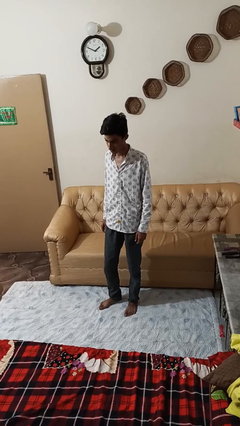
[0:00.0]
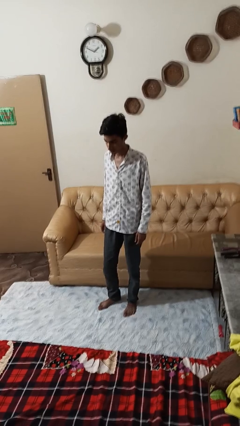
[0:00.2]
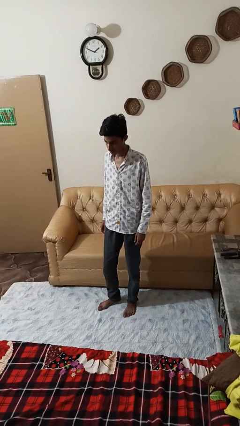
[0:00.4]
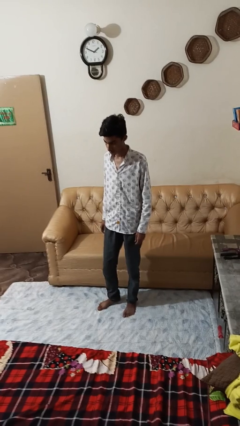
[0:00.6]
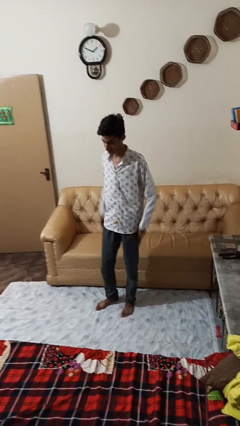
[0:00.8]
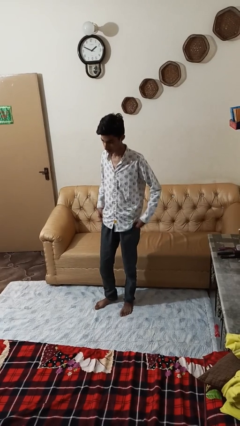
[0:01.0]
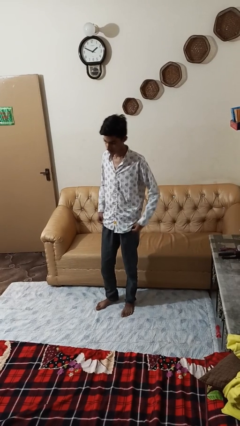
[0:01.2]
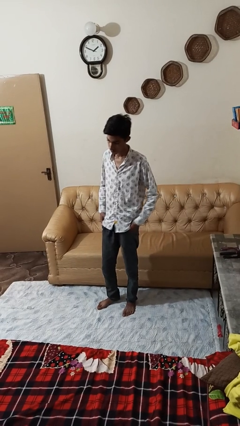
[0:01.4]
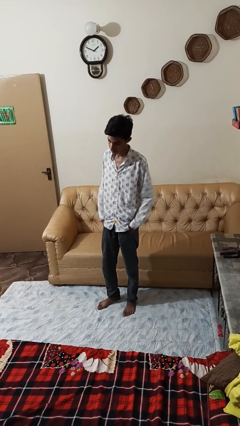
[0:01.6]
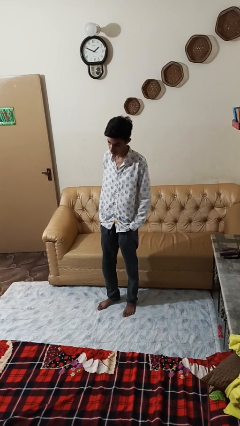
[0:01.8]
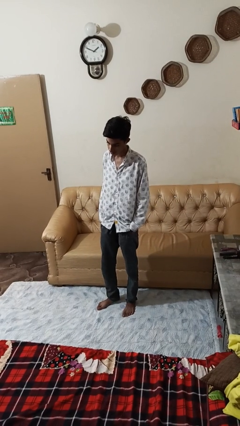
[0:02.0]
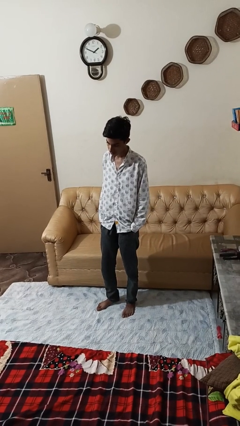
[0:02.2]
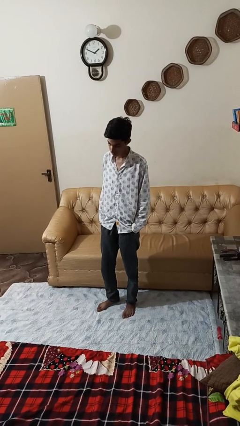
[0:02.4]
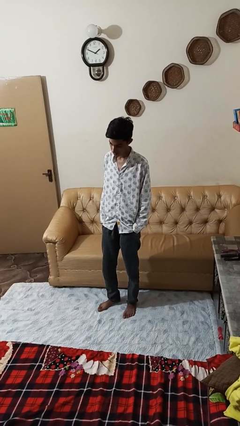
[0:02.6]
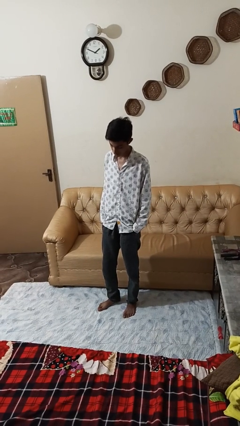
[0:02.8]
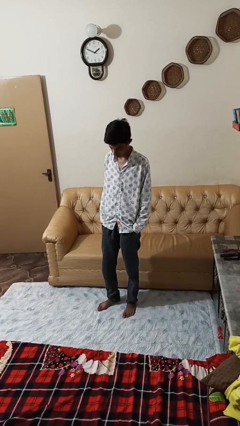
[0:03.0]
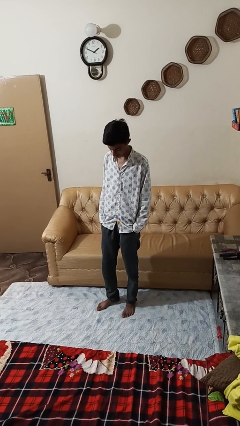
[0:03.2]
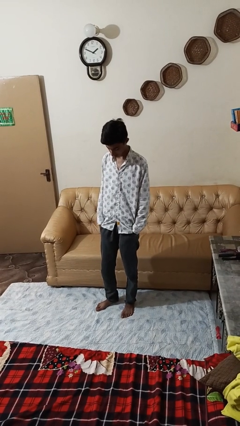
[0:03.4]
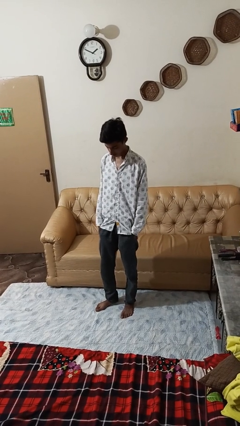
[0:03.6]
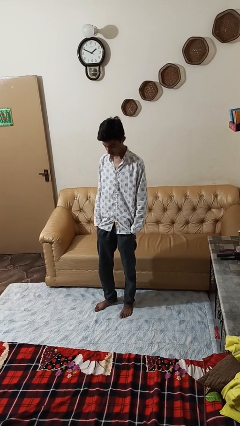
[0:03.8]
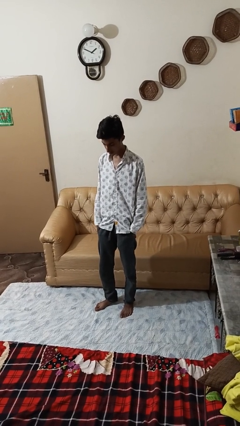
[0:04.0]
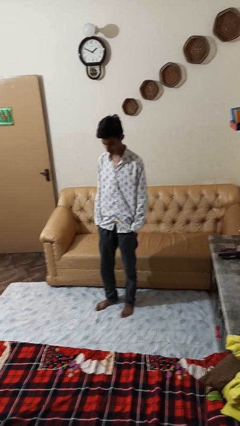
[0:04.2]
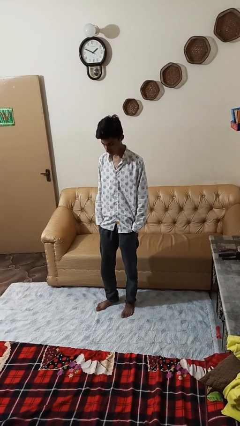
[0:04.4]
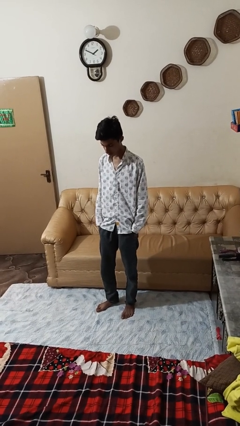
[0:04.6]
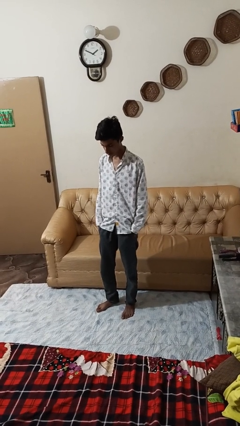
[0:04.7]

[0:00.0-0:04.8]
person puts hands in back pockets

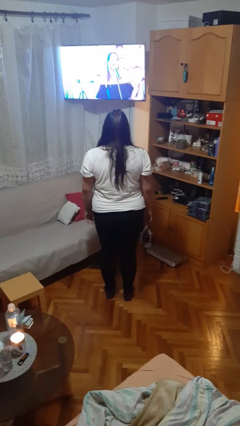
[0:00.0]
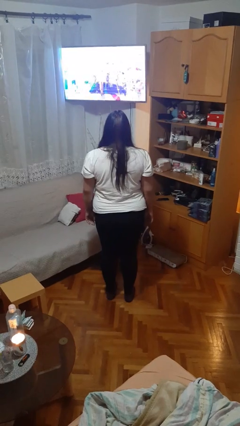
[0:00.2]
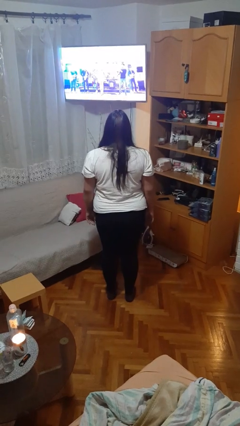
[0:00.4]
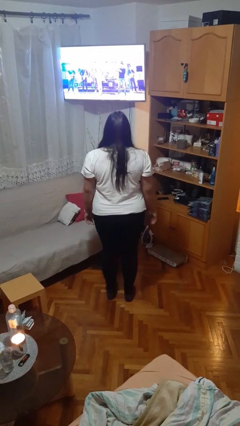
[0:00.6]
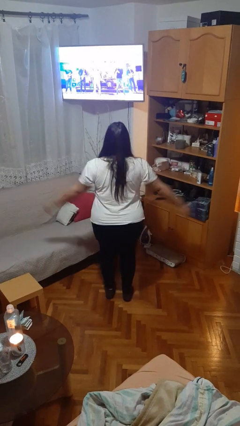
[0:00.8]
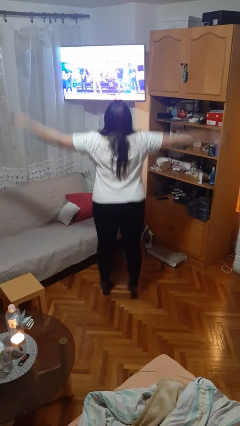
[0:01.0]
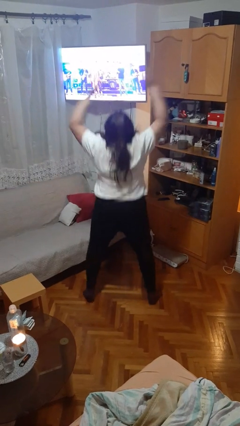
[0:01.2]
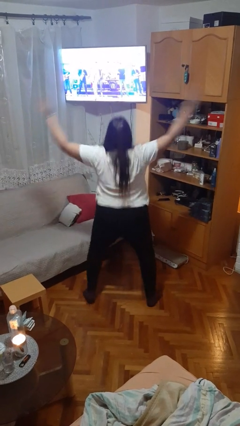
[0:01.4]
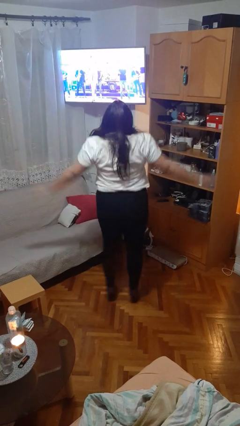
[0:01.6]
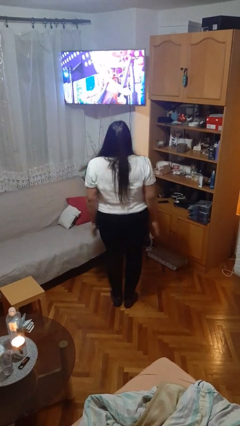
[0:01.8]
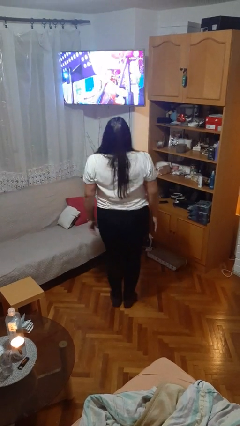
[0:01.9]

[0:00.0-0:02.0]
person exercises with jumping jacks

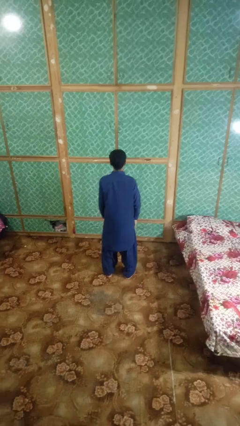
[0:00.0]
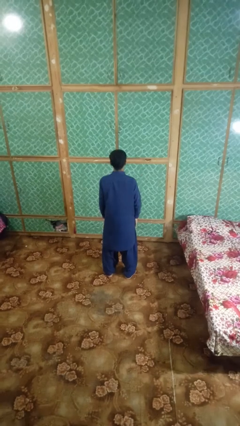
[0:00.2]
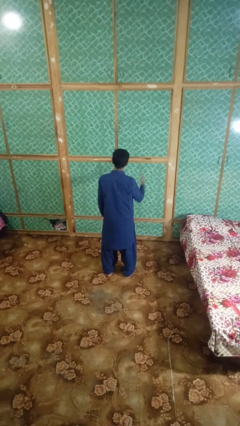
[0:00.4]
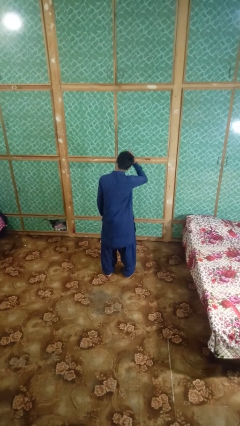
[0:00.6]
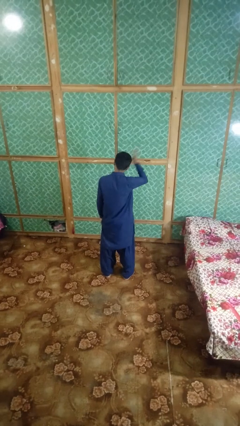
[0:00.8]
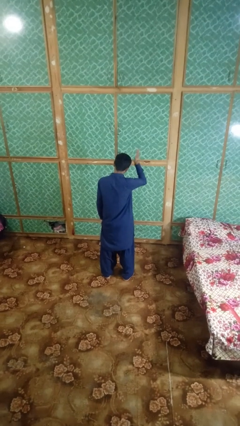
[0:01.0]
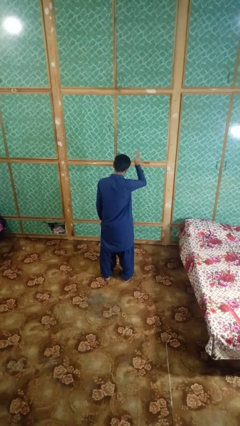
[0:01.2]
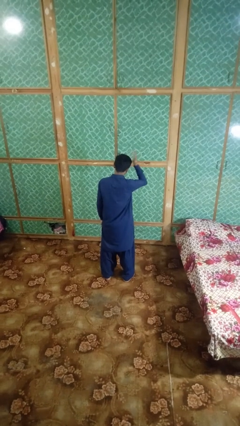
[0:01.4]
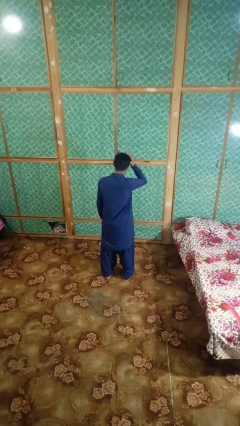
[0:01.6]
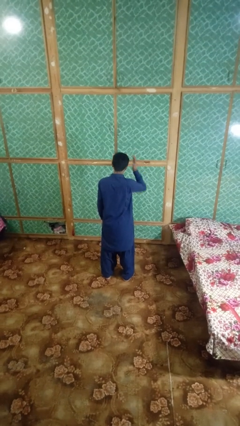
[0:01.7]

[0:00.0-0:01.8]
person pats head

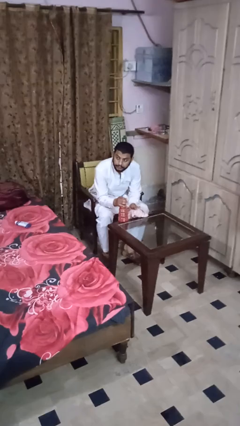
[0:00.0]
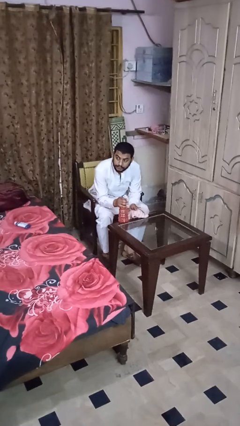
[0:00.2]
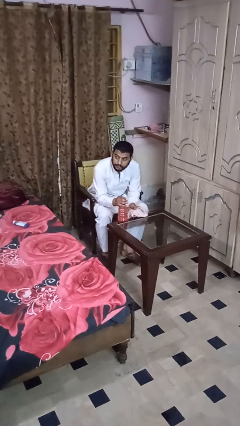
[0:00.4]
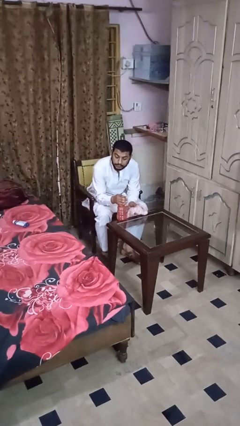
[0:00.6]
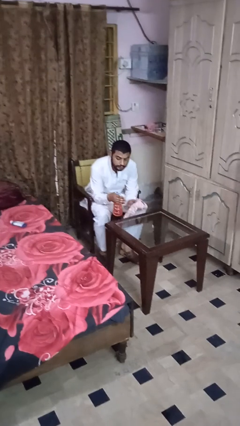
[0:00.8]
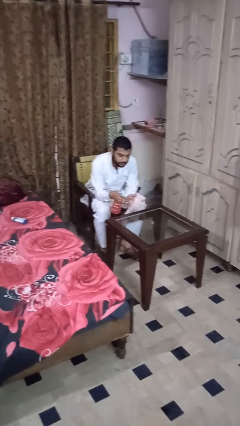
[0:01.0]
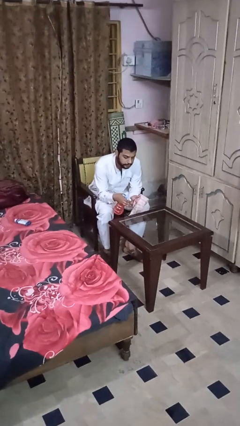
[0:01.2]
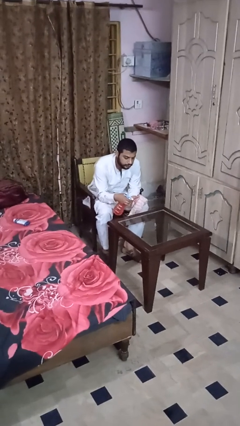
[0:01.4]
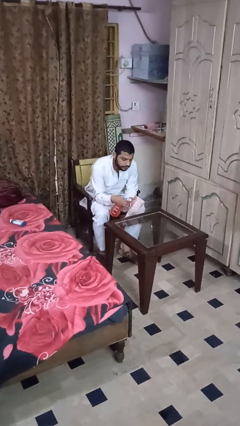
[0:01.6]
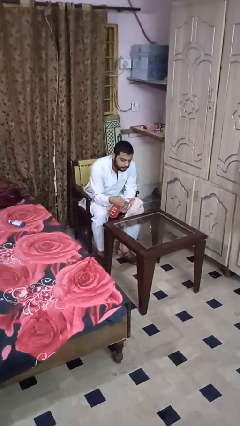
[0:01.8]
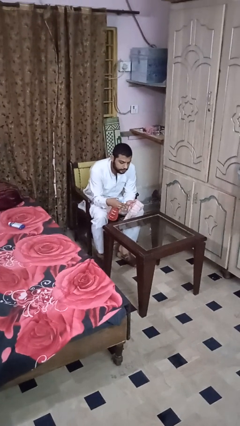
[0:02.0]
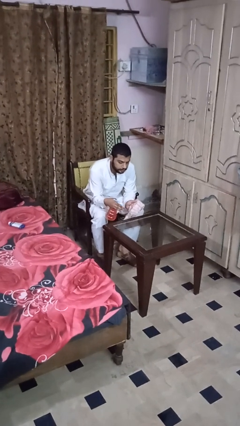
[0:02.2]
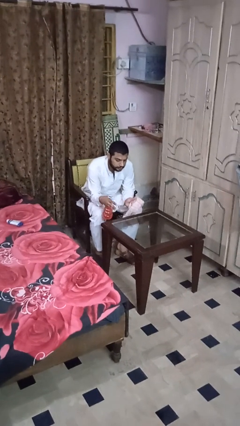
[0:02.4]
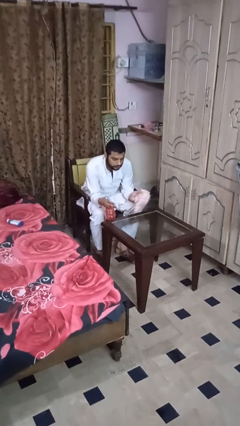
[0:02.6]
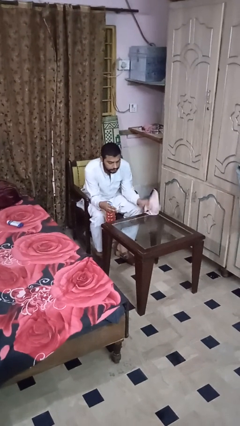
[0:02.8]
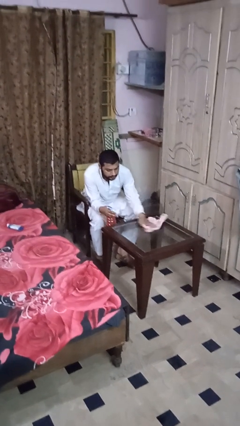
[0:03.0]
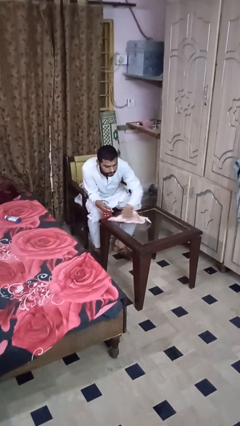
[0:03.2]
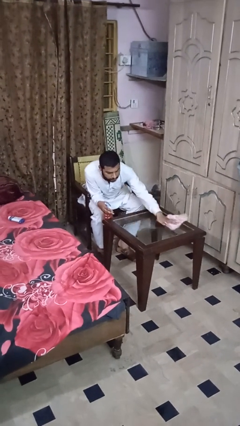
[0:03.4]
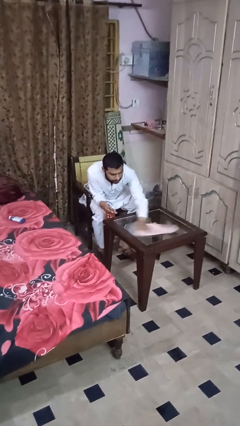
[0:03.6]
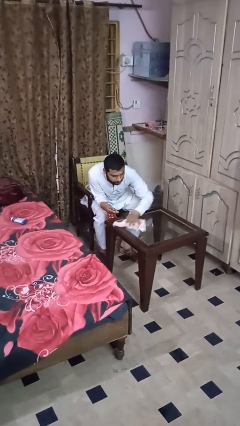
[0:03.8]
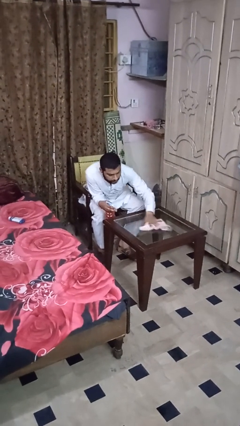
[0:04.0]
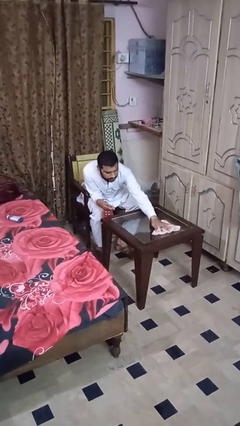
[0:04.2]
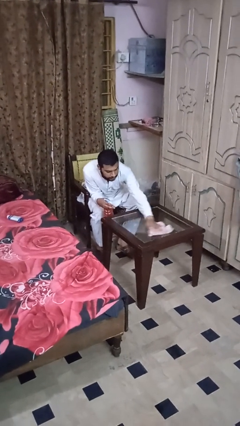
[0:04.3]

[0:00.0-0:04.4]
person sprays from bottle

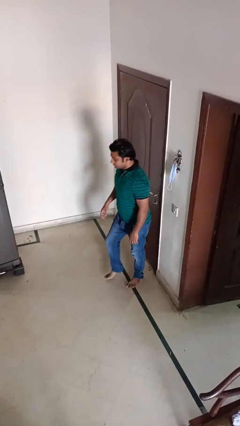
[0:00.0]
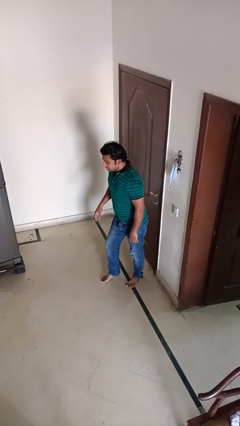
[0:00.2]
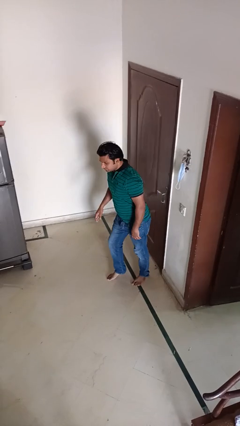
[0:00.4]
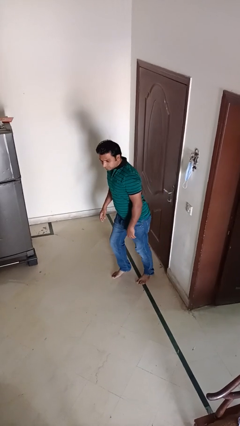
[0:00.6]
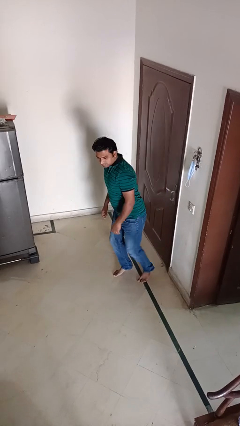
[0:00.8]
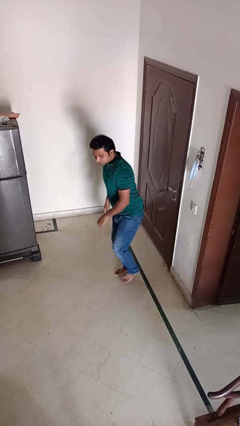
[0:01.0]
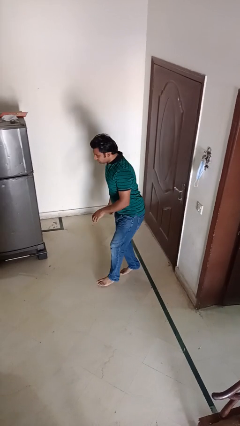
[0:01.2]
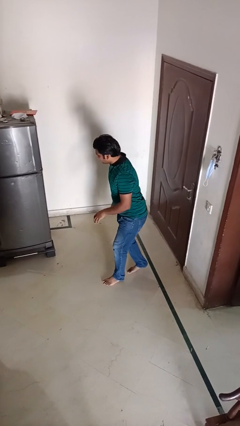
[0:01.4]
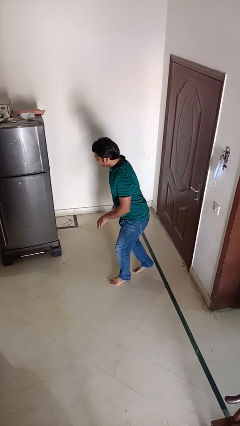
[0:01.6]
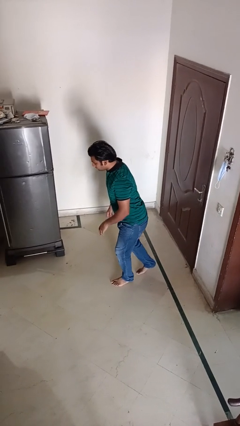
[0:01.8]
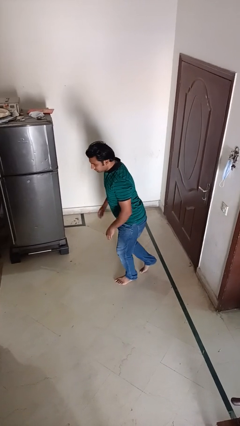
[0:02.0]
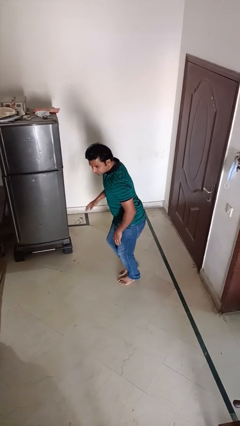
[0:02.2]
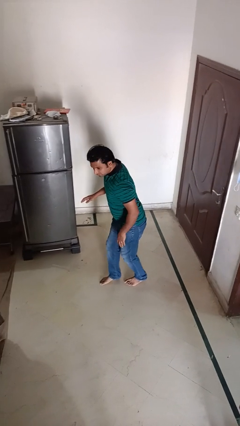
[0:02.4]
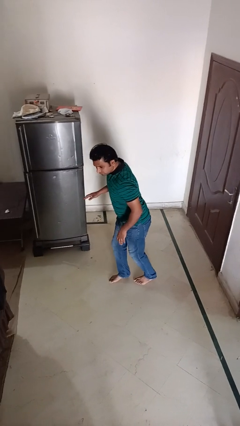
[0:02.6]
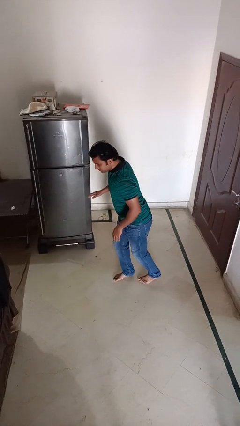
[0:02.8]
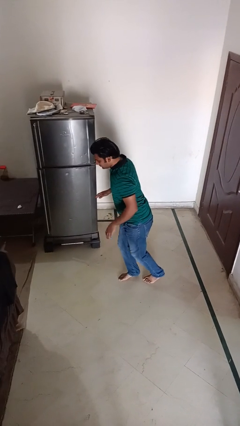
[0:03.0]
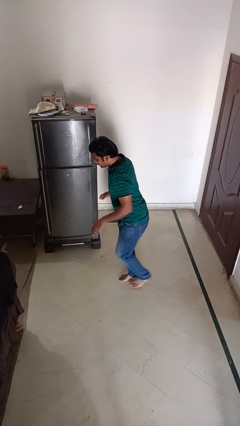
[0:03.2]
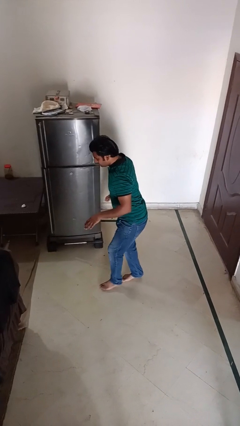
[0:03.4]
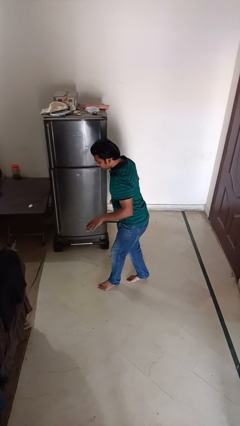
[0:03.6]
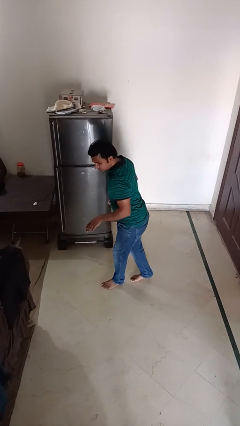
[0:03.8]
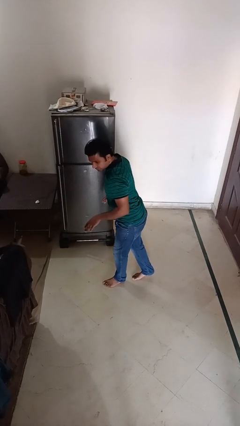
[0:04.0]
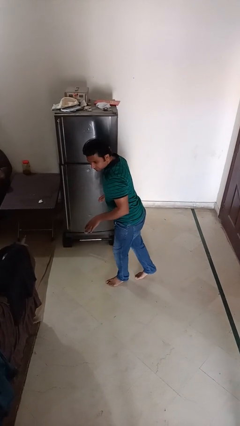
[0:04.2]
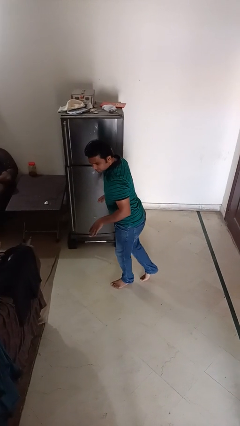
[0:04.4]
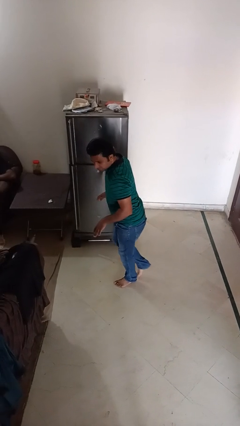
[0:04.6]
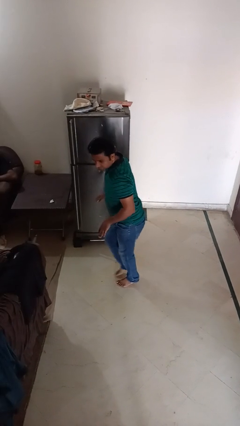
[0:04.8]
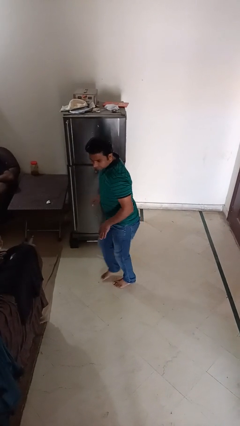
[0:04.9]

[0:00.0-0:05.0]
person walks tiptoe
